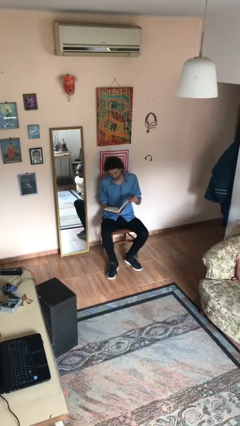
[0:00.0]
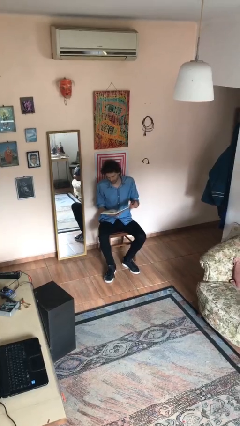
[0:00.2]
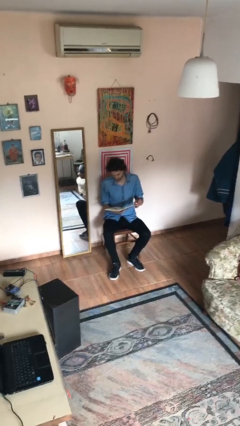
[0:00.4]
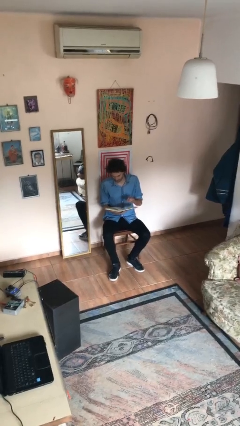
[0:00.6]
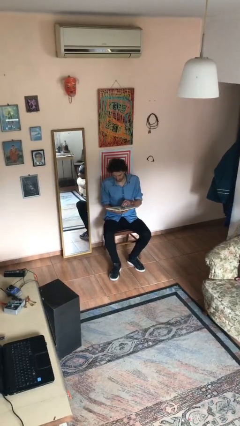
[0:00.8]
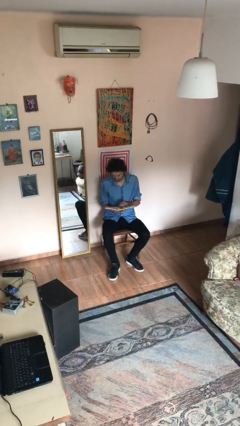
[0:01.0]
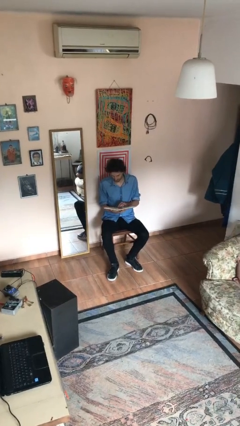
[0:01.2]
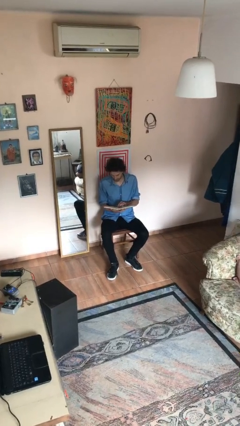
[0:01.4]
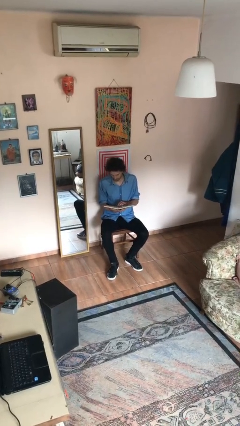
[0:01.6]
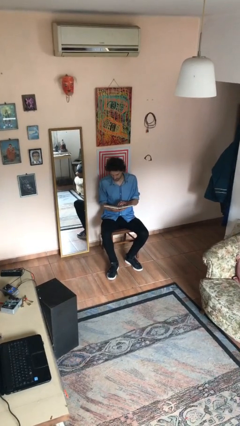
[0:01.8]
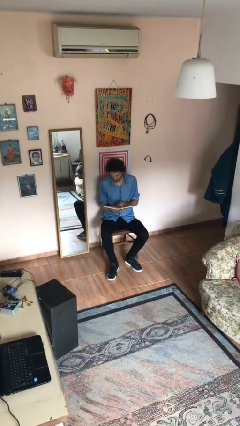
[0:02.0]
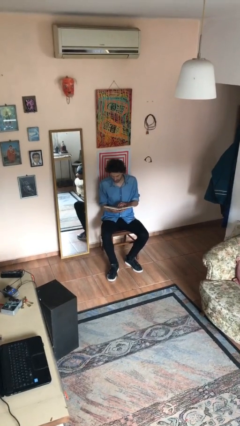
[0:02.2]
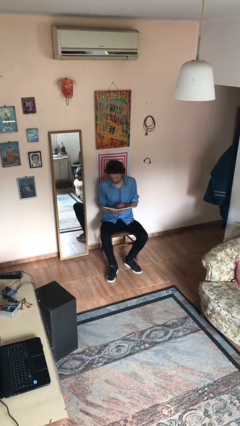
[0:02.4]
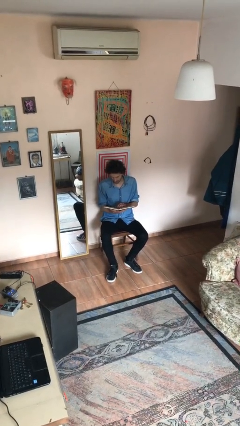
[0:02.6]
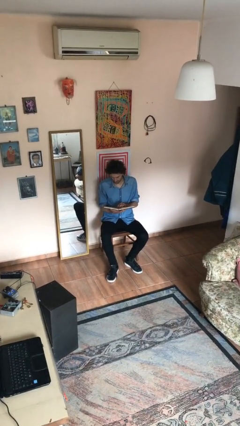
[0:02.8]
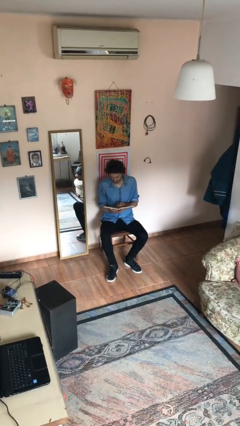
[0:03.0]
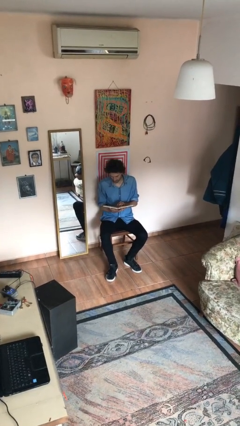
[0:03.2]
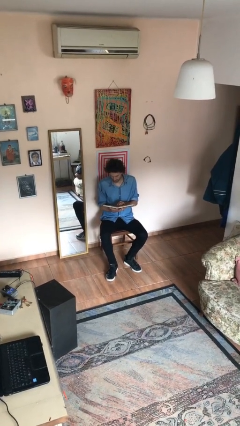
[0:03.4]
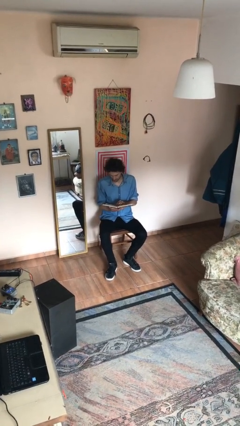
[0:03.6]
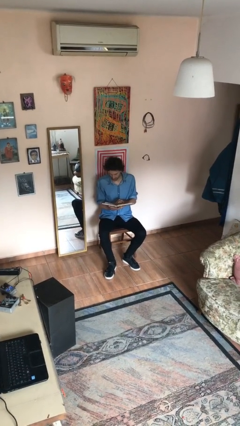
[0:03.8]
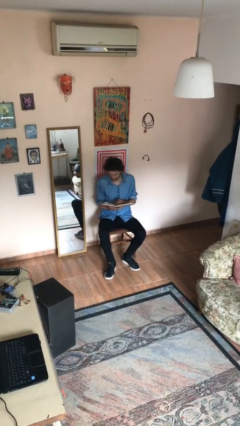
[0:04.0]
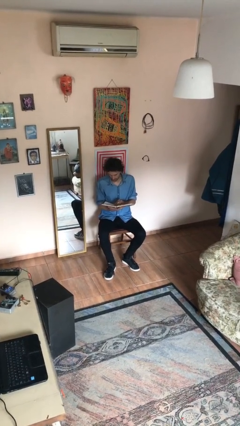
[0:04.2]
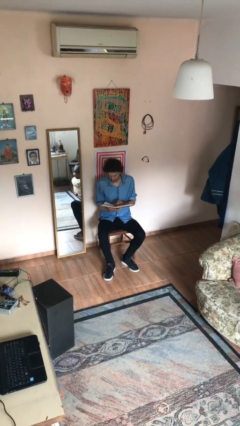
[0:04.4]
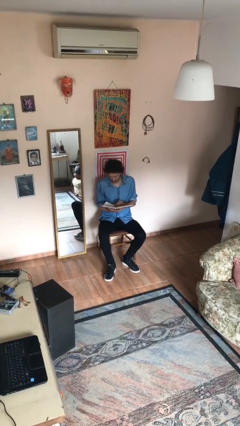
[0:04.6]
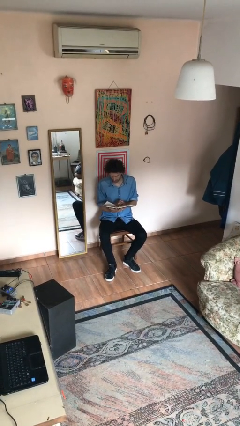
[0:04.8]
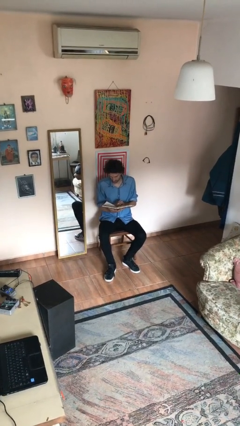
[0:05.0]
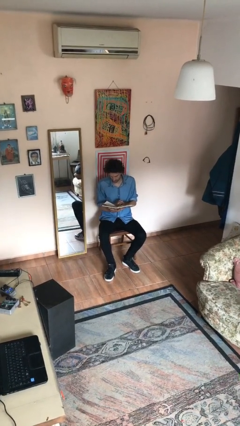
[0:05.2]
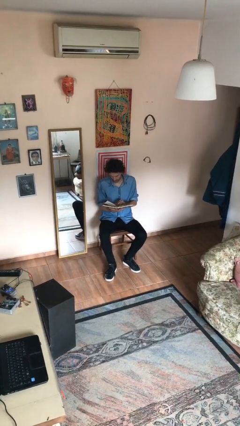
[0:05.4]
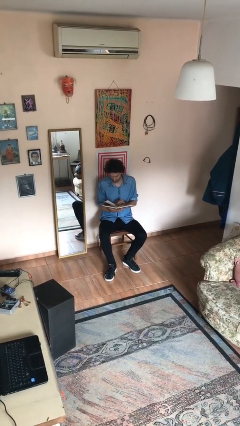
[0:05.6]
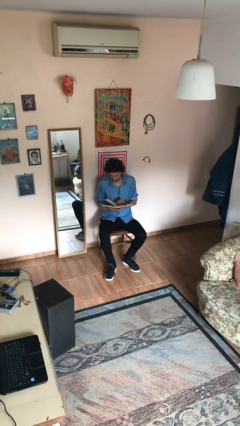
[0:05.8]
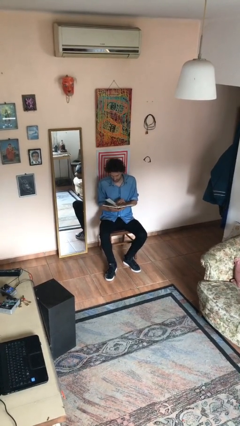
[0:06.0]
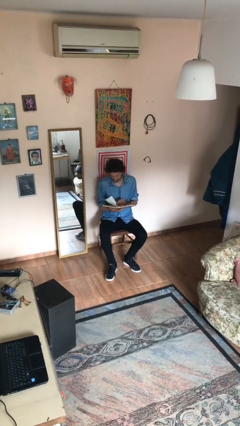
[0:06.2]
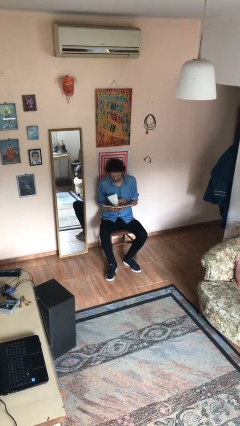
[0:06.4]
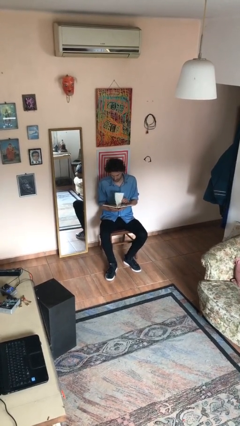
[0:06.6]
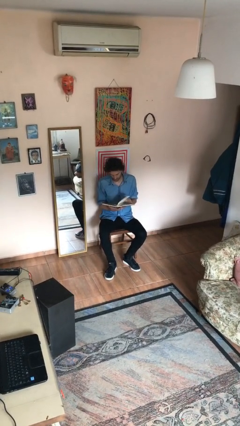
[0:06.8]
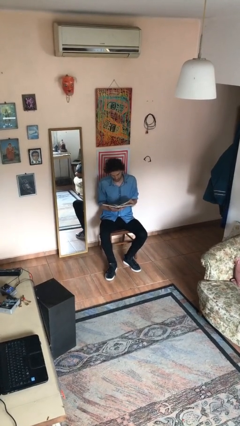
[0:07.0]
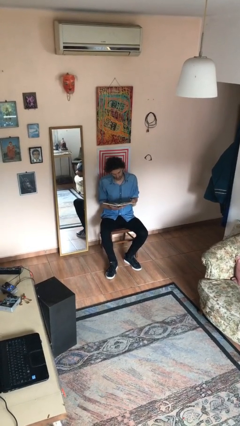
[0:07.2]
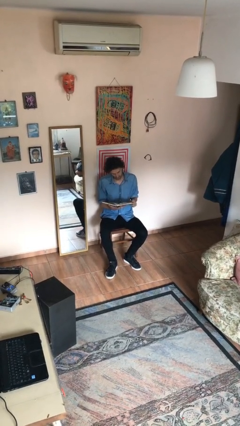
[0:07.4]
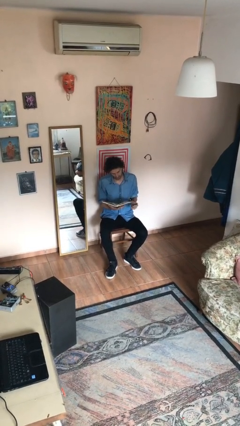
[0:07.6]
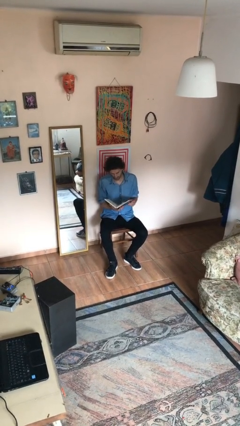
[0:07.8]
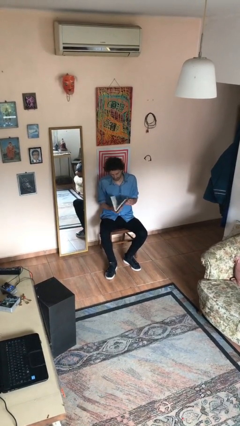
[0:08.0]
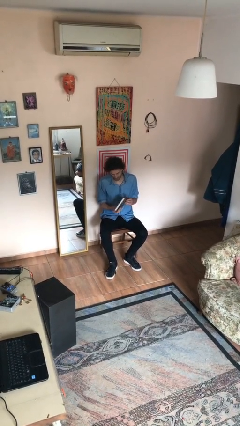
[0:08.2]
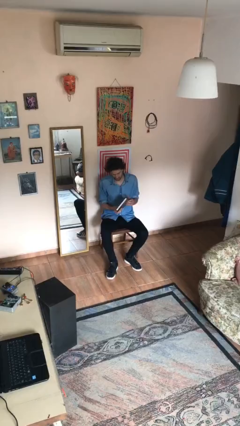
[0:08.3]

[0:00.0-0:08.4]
person reads document

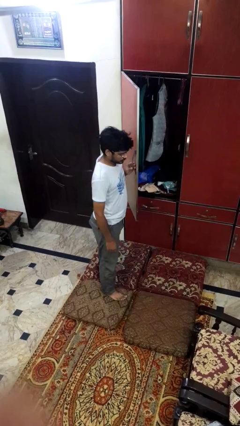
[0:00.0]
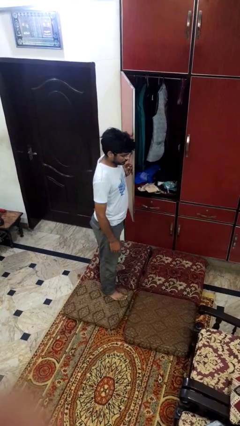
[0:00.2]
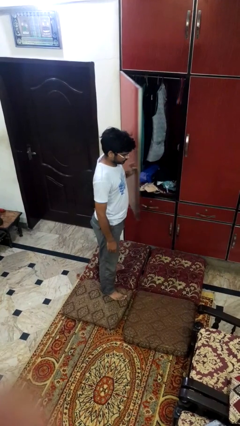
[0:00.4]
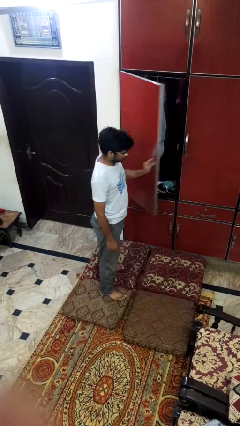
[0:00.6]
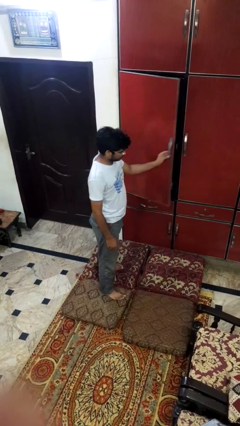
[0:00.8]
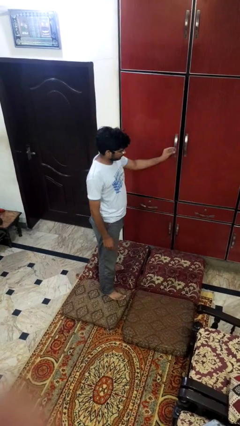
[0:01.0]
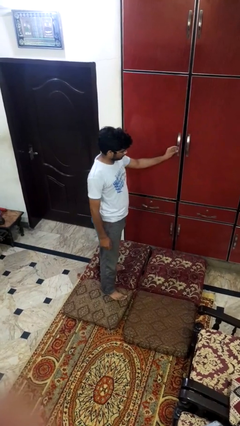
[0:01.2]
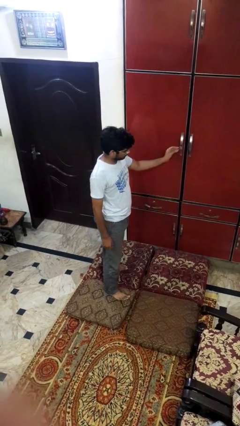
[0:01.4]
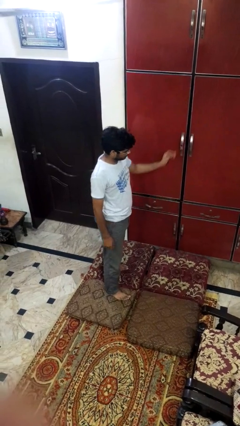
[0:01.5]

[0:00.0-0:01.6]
person closes closet door

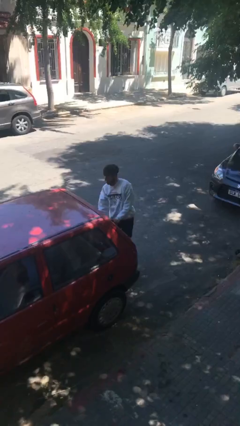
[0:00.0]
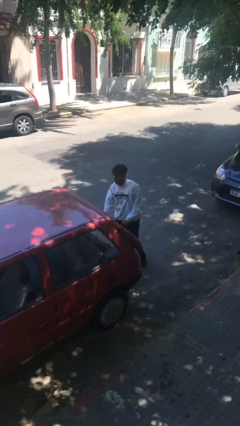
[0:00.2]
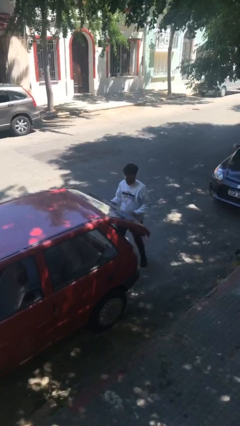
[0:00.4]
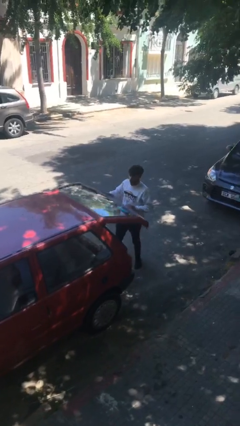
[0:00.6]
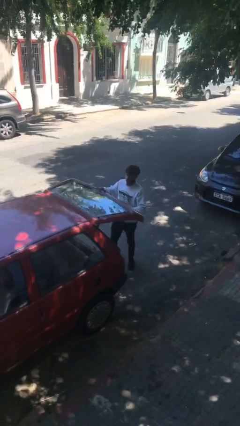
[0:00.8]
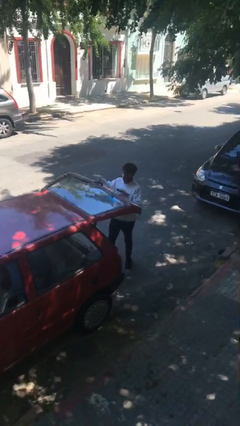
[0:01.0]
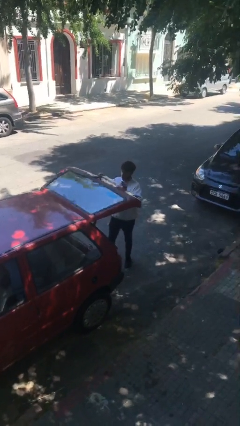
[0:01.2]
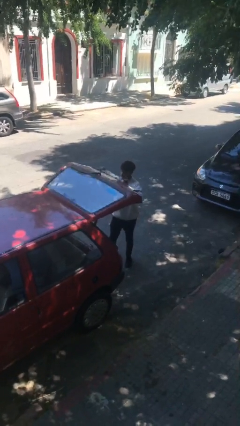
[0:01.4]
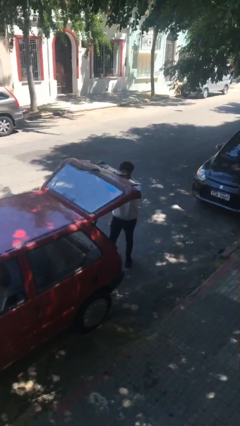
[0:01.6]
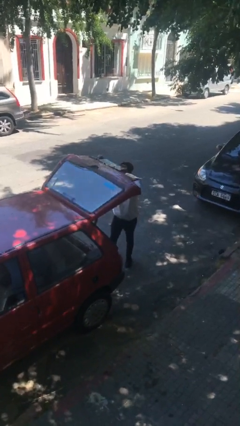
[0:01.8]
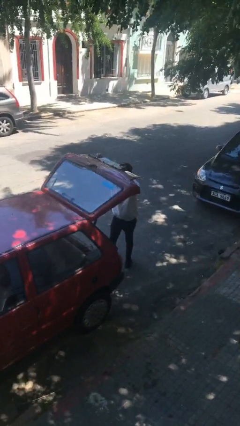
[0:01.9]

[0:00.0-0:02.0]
person opens car trunk

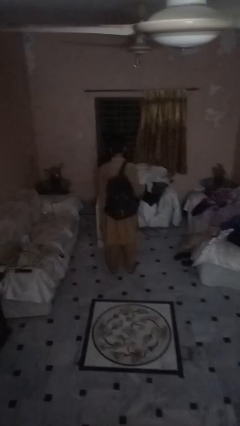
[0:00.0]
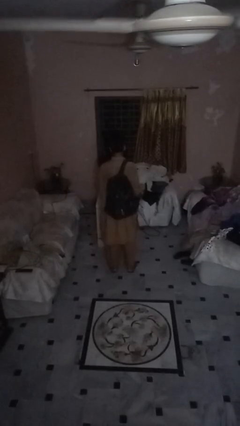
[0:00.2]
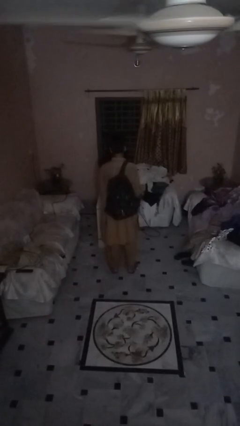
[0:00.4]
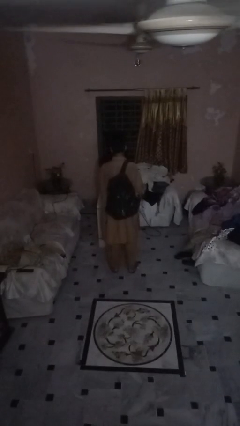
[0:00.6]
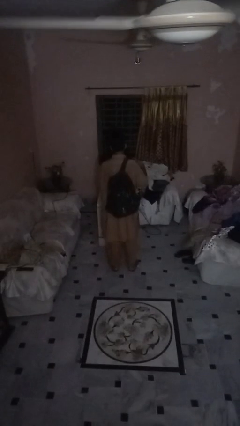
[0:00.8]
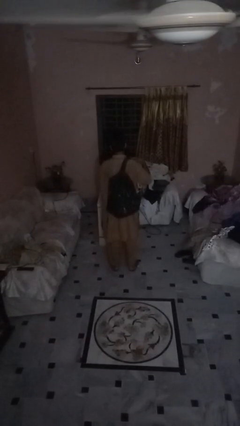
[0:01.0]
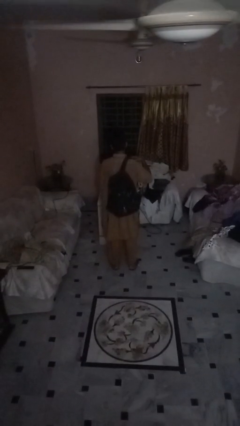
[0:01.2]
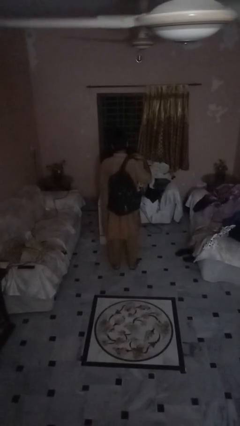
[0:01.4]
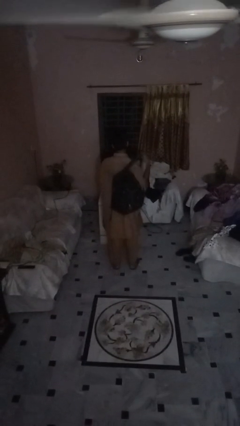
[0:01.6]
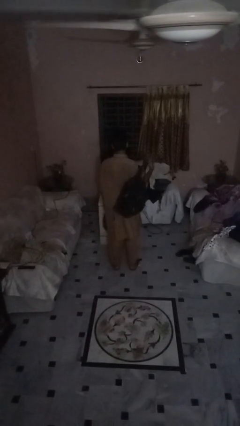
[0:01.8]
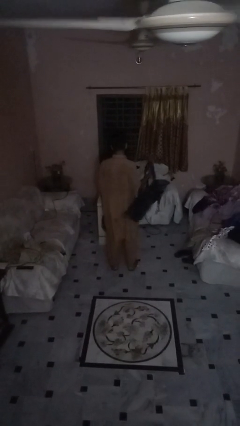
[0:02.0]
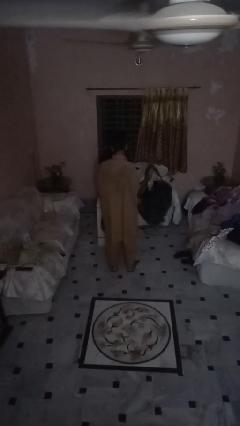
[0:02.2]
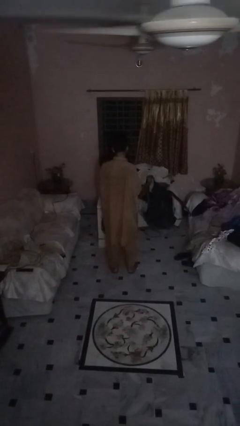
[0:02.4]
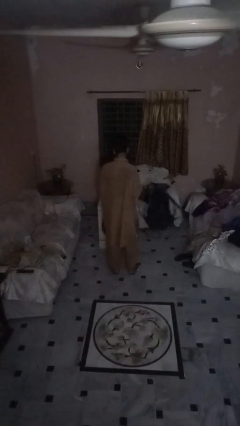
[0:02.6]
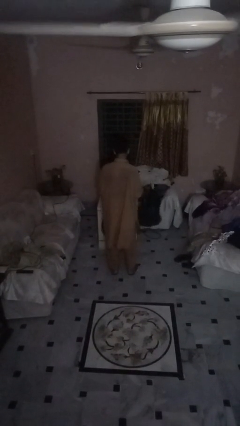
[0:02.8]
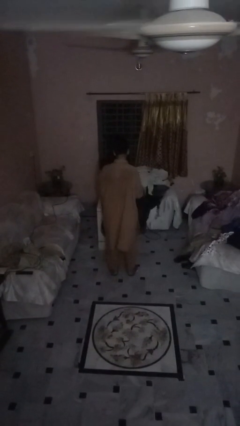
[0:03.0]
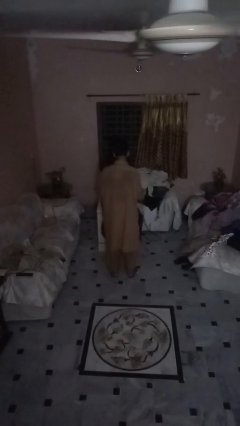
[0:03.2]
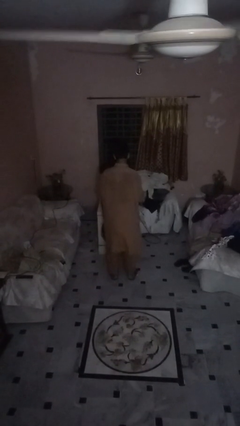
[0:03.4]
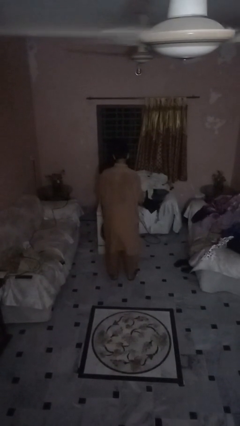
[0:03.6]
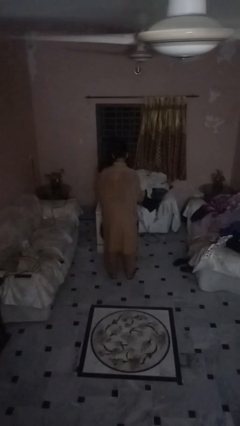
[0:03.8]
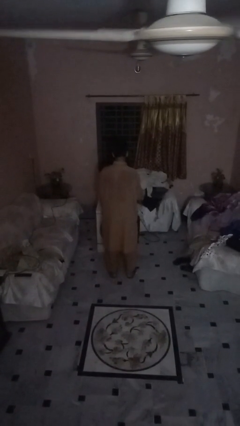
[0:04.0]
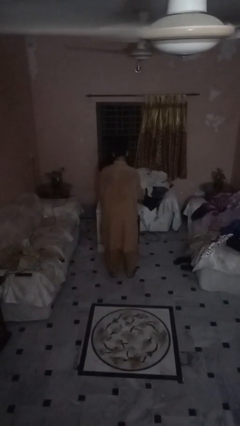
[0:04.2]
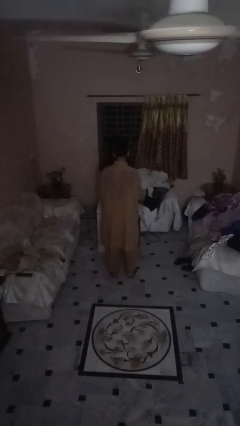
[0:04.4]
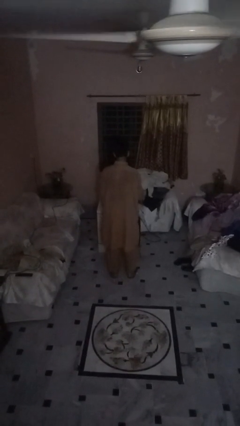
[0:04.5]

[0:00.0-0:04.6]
person takes off backpack

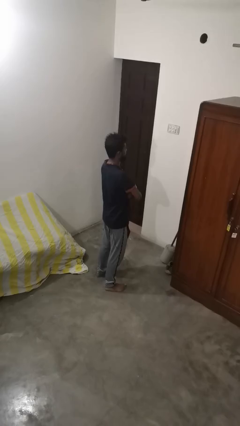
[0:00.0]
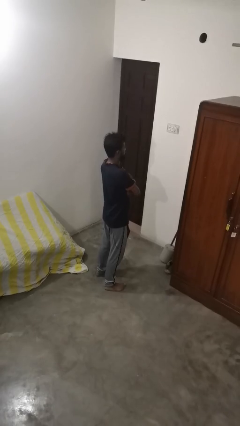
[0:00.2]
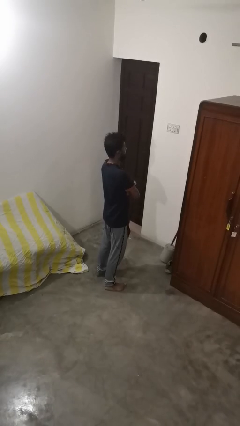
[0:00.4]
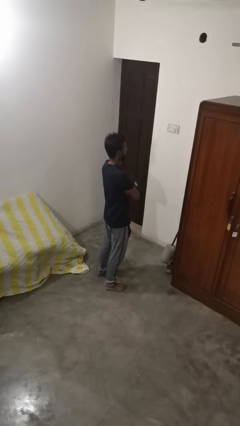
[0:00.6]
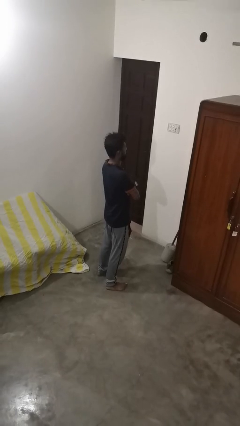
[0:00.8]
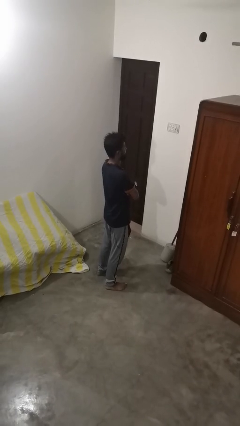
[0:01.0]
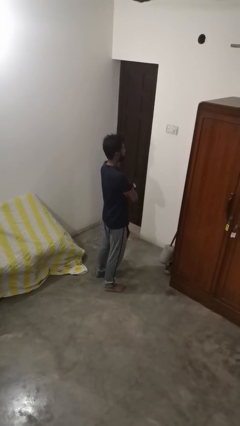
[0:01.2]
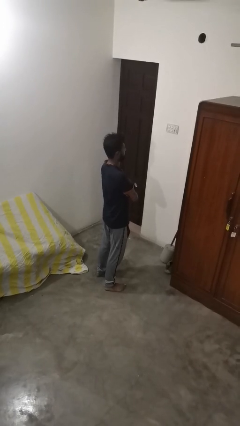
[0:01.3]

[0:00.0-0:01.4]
person crosses arms
